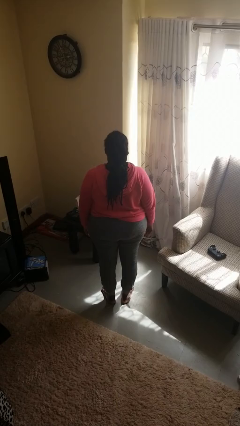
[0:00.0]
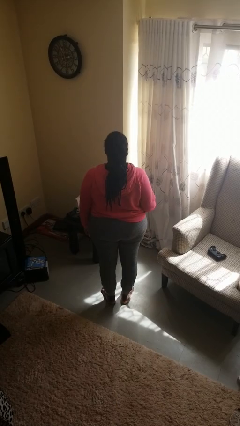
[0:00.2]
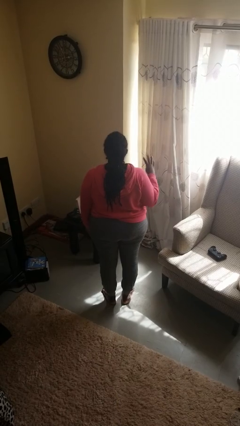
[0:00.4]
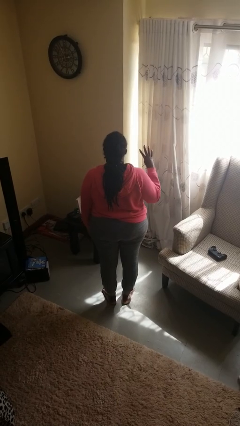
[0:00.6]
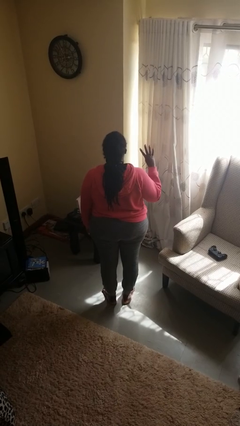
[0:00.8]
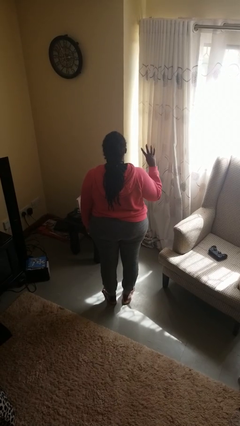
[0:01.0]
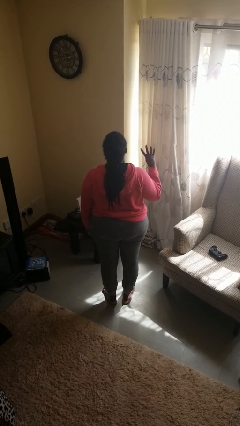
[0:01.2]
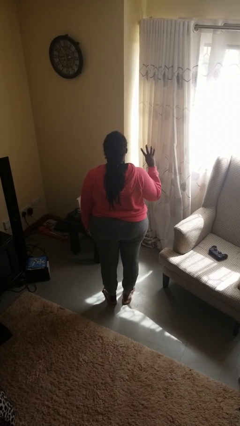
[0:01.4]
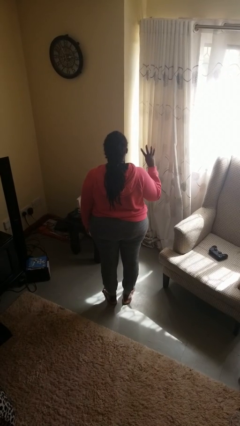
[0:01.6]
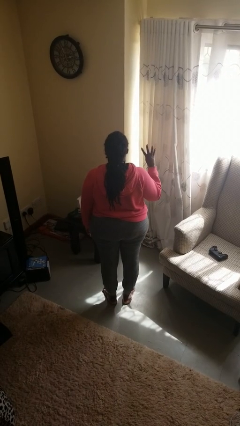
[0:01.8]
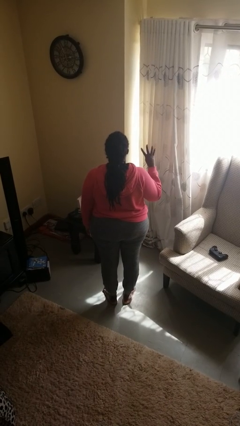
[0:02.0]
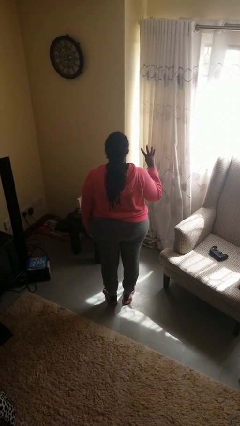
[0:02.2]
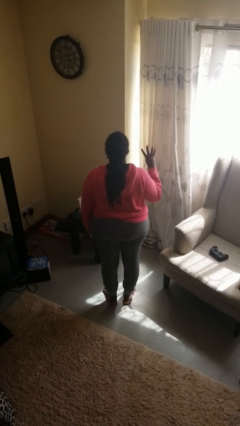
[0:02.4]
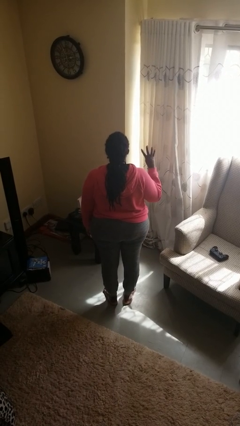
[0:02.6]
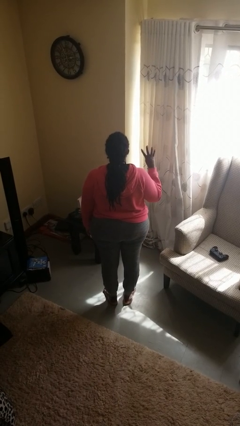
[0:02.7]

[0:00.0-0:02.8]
person gestures number four

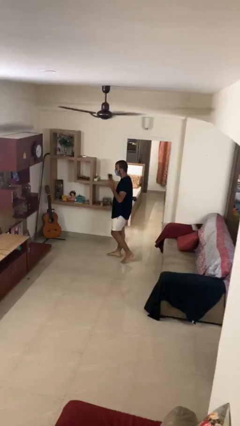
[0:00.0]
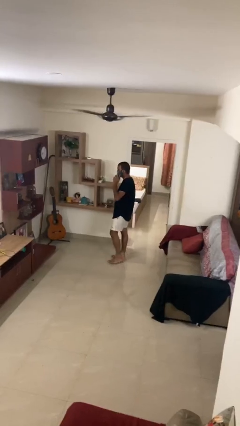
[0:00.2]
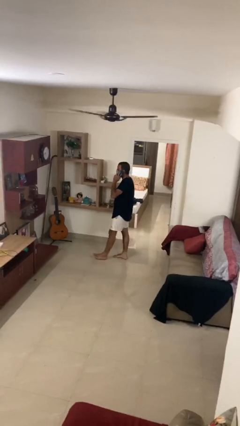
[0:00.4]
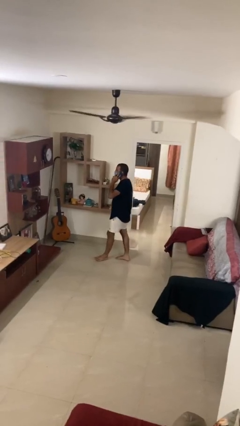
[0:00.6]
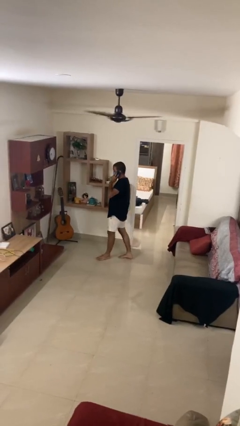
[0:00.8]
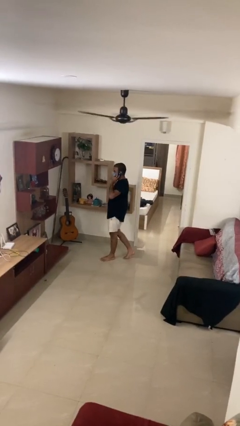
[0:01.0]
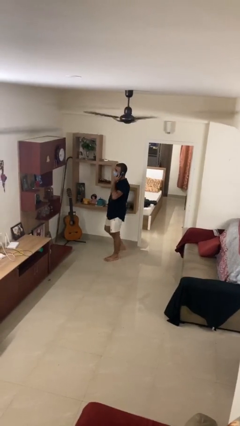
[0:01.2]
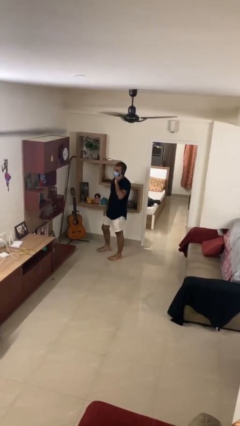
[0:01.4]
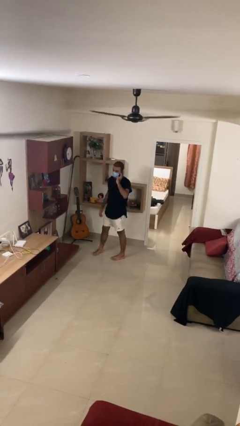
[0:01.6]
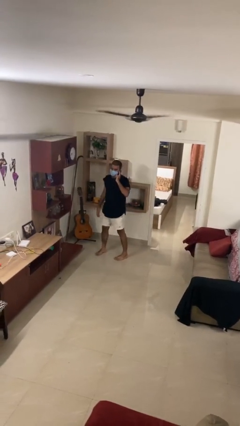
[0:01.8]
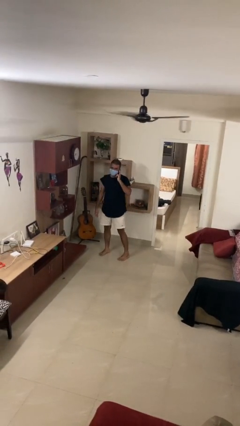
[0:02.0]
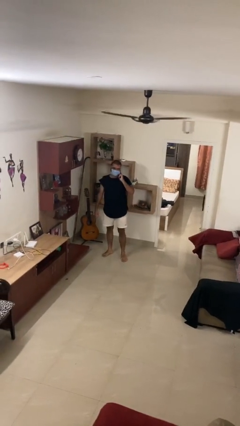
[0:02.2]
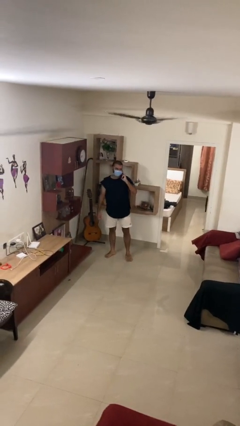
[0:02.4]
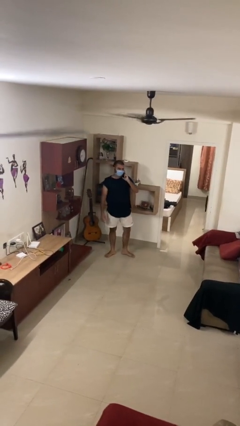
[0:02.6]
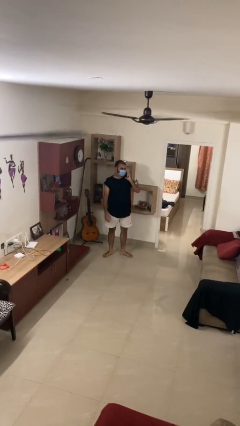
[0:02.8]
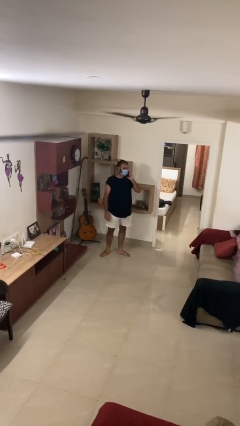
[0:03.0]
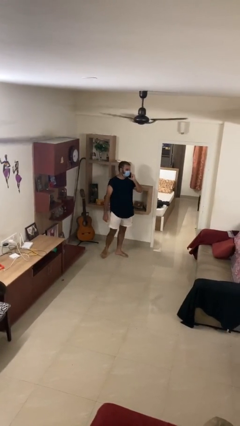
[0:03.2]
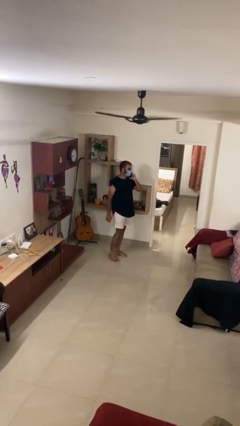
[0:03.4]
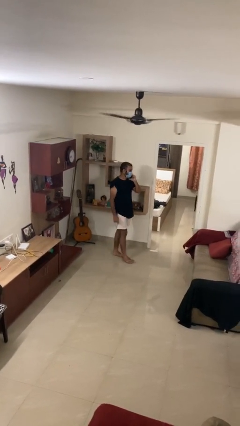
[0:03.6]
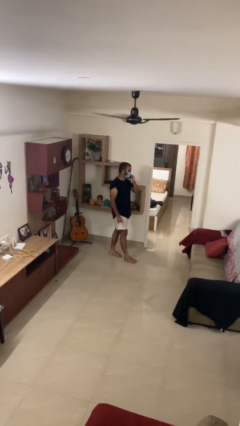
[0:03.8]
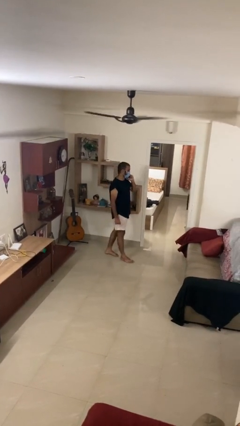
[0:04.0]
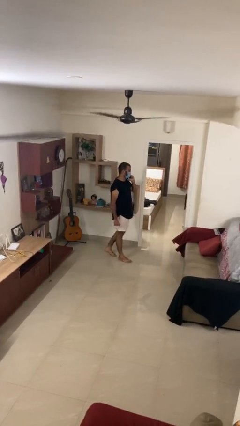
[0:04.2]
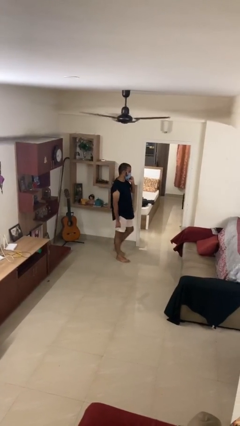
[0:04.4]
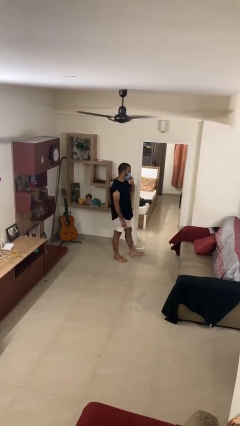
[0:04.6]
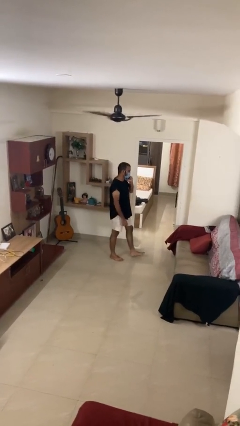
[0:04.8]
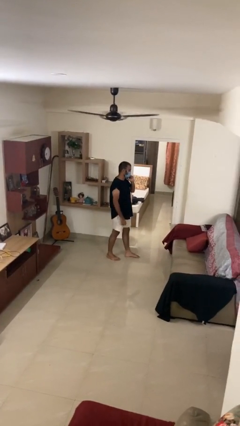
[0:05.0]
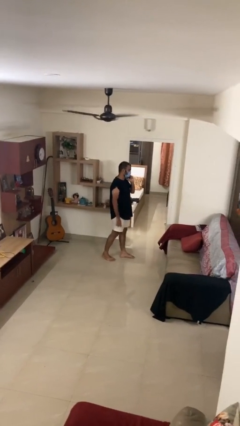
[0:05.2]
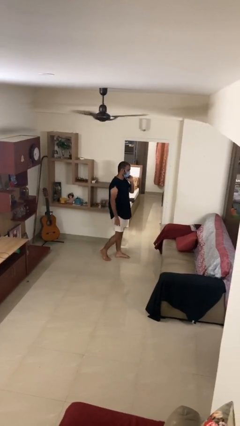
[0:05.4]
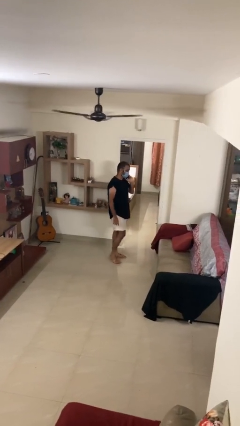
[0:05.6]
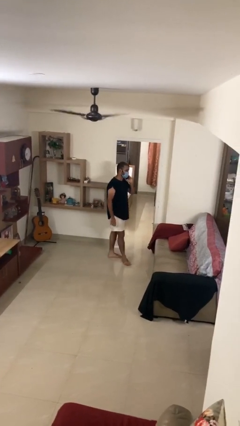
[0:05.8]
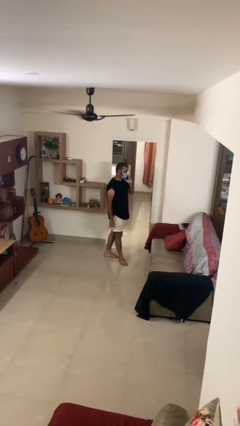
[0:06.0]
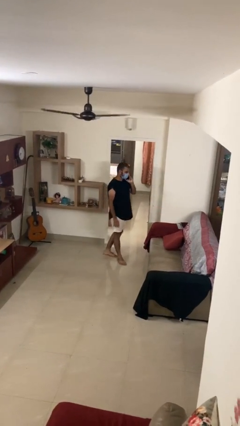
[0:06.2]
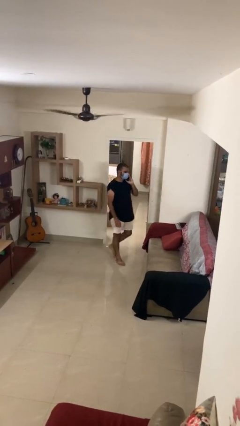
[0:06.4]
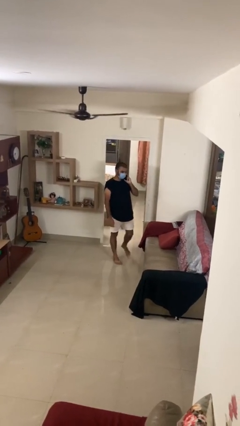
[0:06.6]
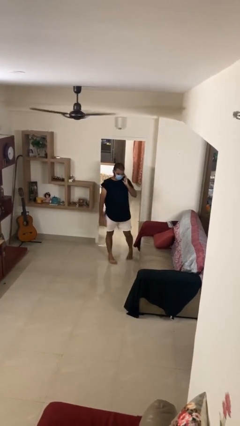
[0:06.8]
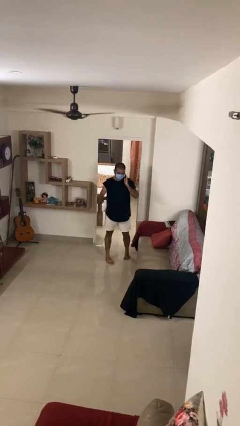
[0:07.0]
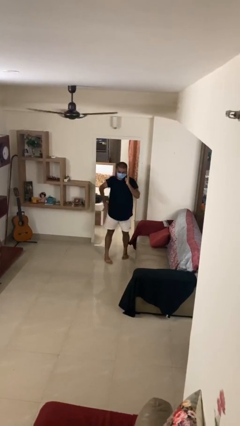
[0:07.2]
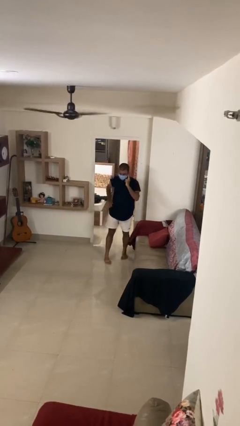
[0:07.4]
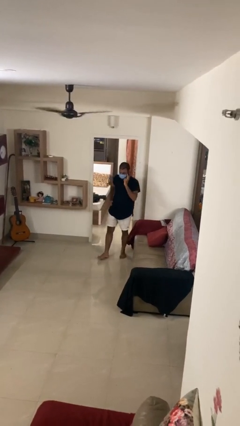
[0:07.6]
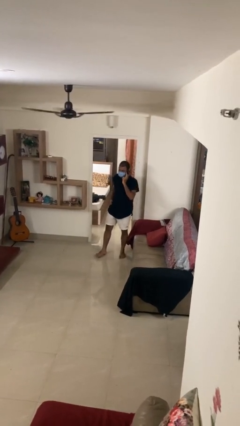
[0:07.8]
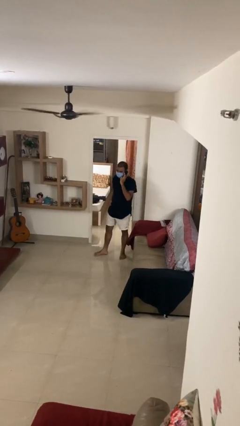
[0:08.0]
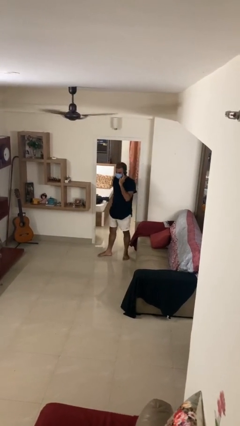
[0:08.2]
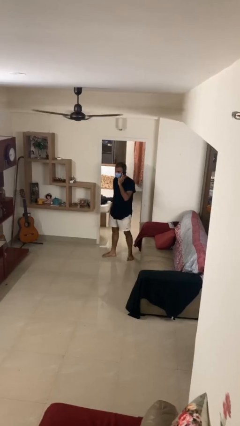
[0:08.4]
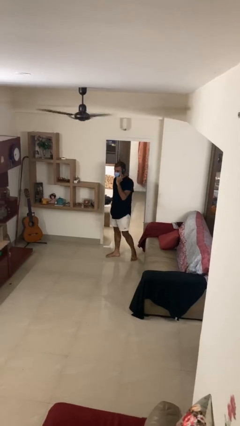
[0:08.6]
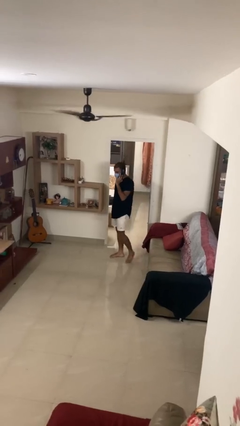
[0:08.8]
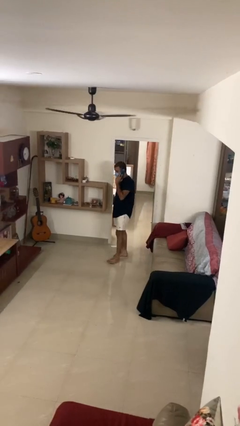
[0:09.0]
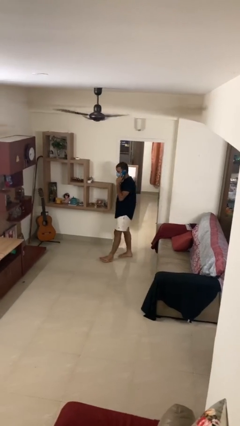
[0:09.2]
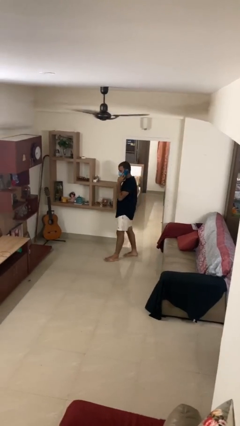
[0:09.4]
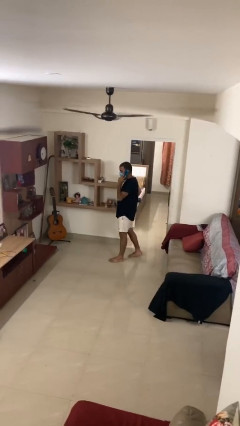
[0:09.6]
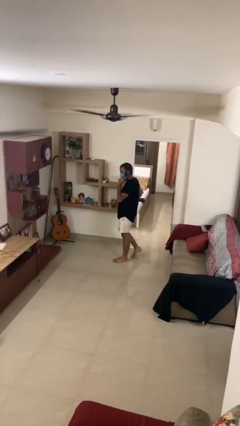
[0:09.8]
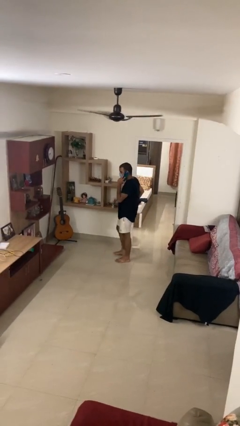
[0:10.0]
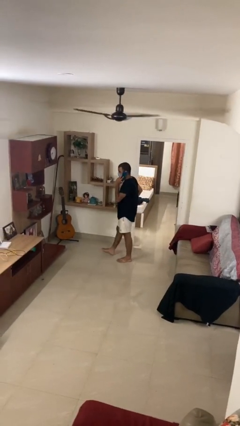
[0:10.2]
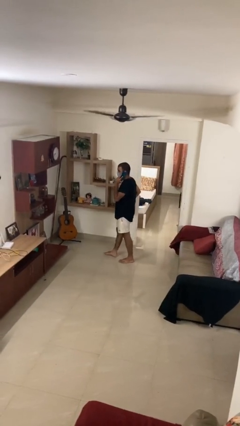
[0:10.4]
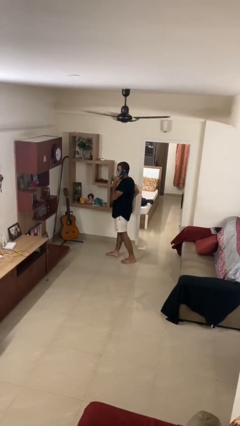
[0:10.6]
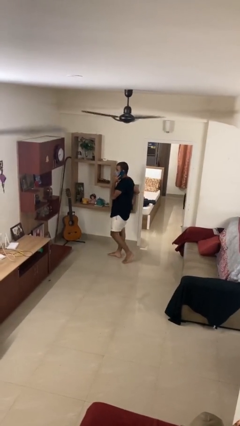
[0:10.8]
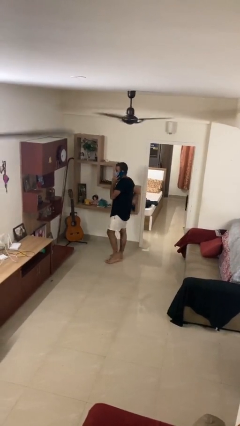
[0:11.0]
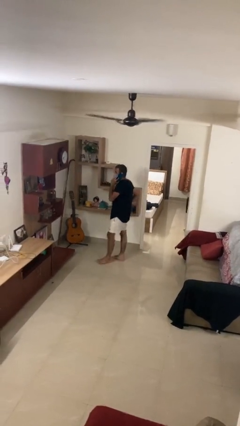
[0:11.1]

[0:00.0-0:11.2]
person talks on phone

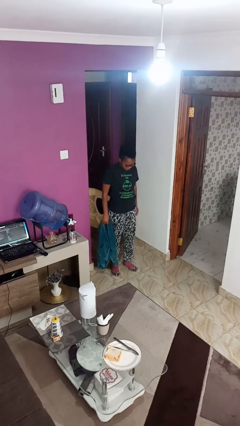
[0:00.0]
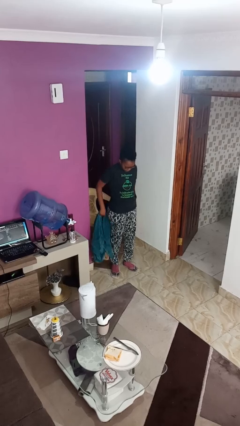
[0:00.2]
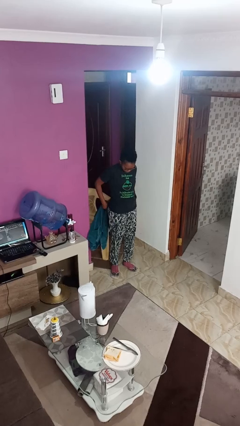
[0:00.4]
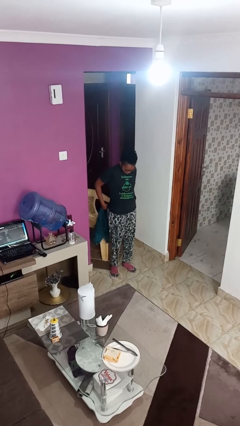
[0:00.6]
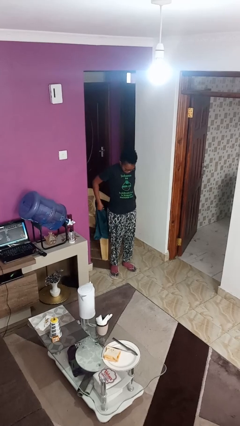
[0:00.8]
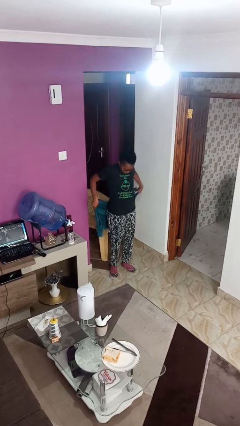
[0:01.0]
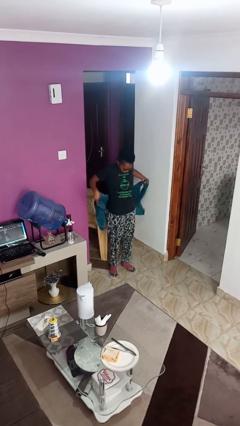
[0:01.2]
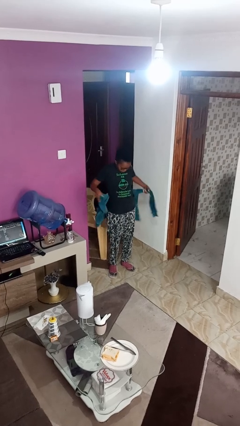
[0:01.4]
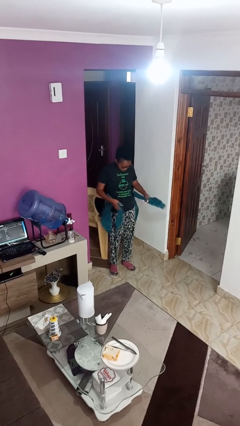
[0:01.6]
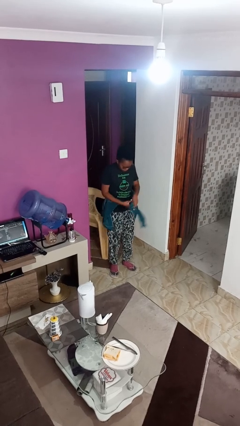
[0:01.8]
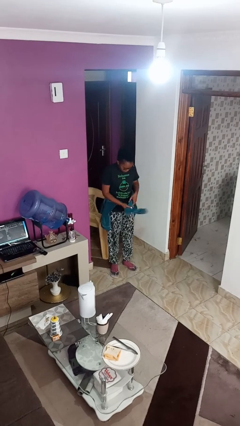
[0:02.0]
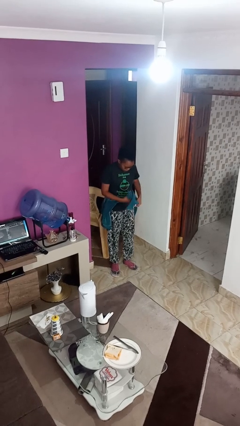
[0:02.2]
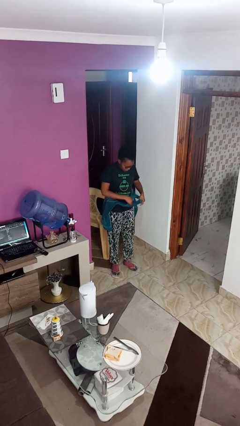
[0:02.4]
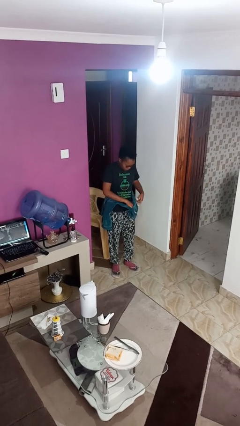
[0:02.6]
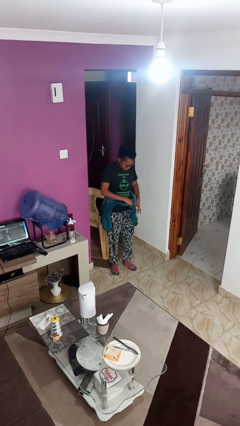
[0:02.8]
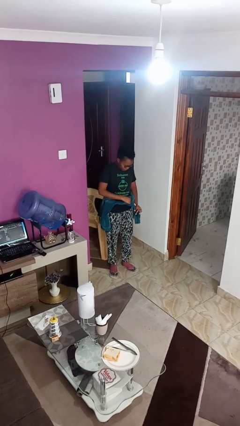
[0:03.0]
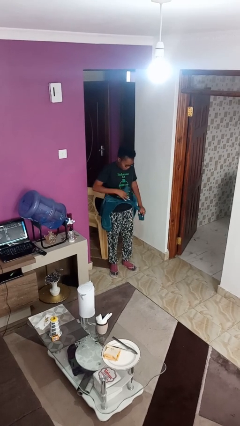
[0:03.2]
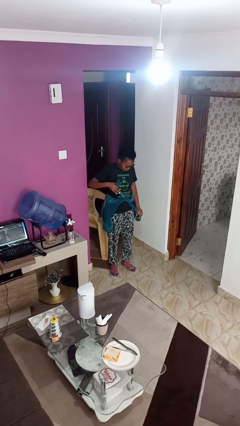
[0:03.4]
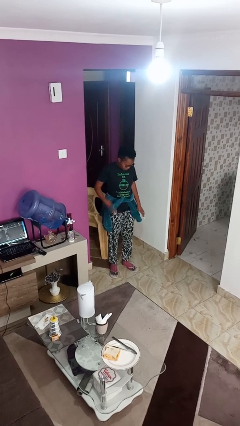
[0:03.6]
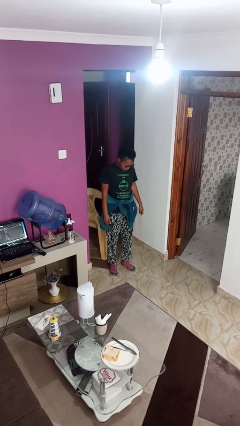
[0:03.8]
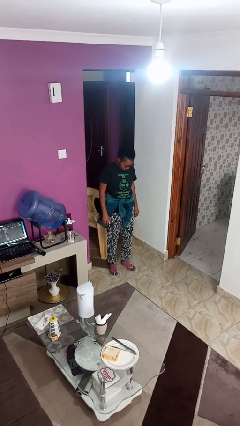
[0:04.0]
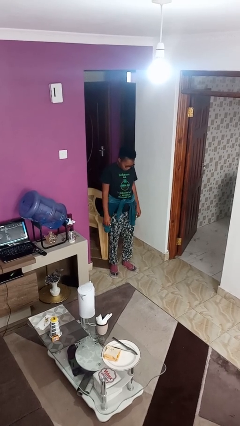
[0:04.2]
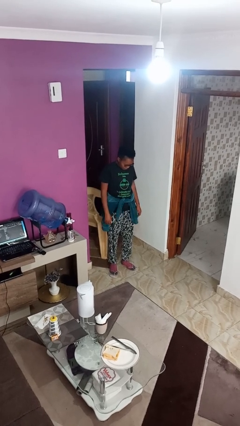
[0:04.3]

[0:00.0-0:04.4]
person ties jacket around waist
